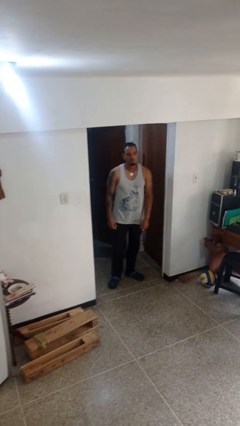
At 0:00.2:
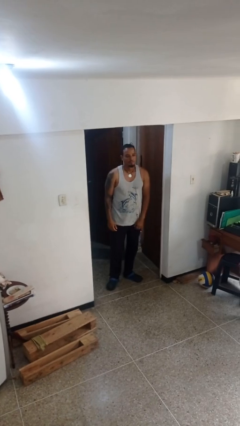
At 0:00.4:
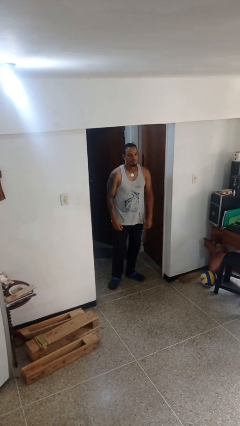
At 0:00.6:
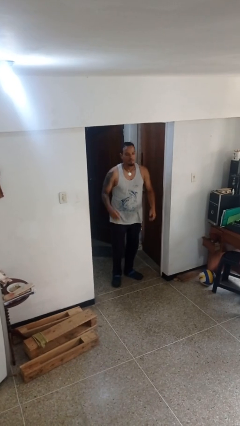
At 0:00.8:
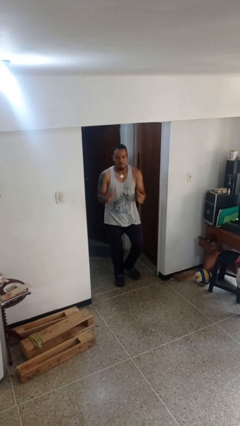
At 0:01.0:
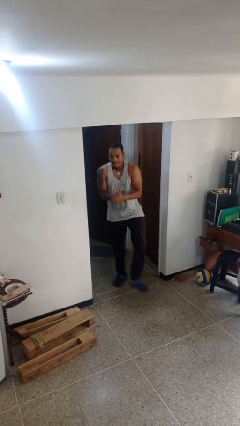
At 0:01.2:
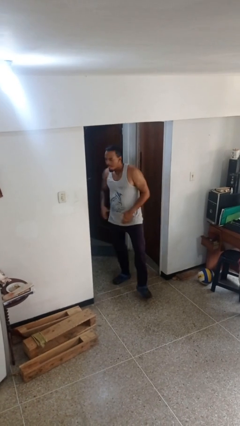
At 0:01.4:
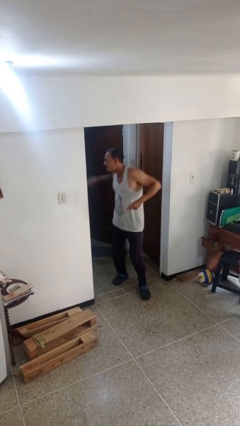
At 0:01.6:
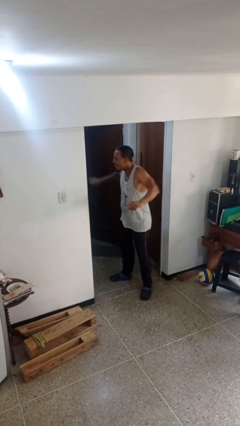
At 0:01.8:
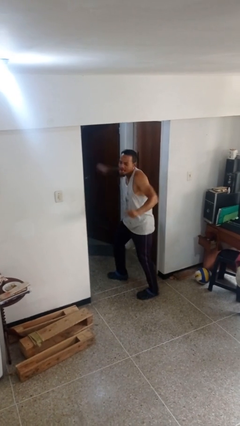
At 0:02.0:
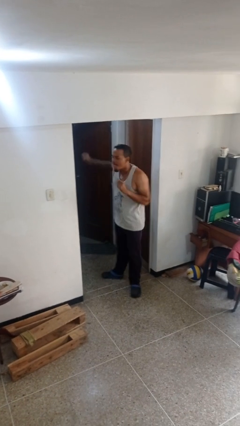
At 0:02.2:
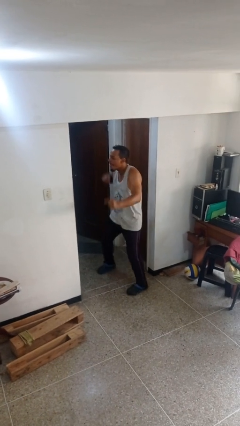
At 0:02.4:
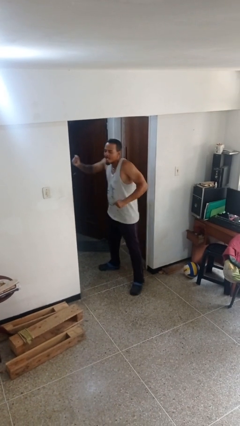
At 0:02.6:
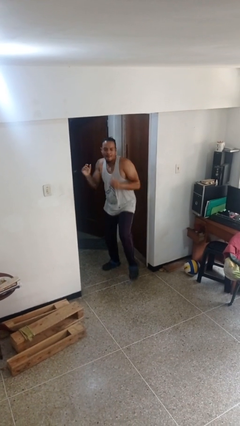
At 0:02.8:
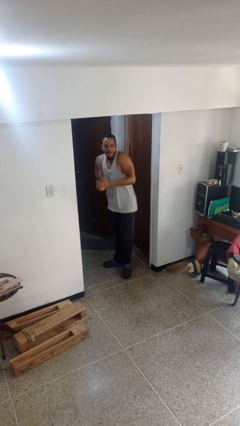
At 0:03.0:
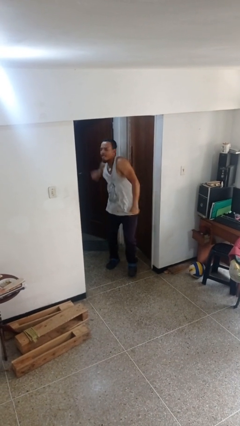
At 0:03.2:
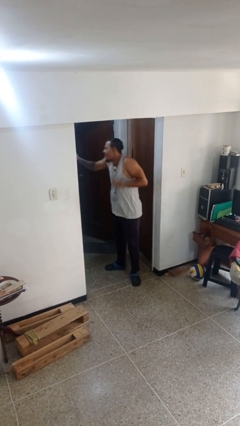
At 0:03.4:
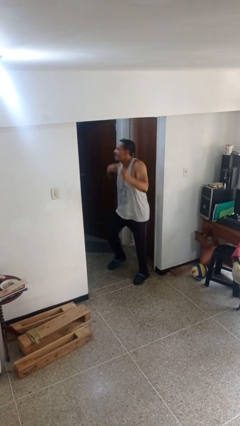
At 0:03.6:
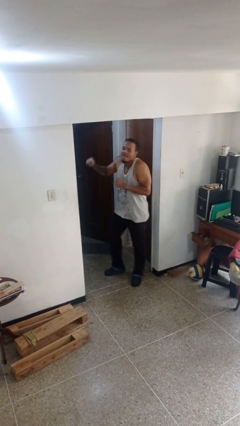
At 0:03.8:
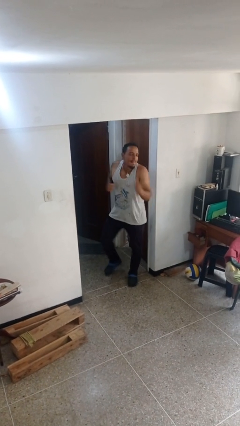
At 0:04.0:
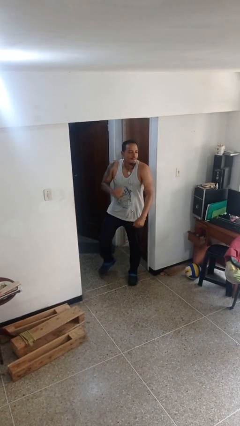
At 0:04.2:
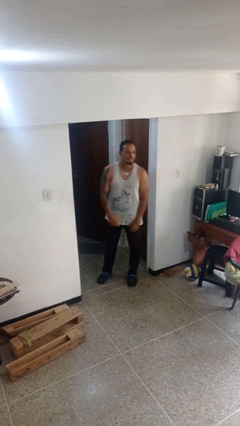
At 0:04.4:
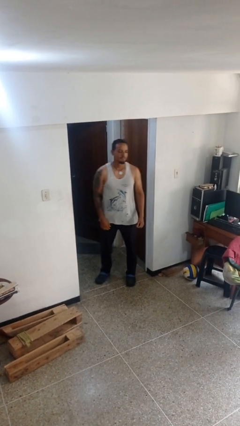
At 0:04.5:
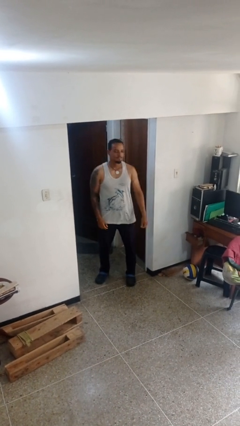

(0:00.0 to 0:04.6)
person dances in place

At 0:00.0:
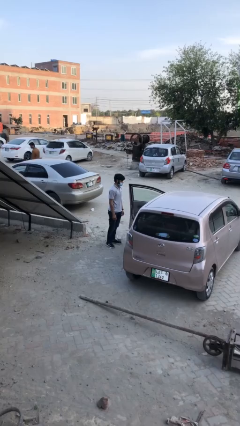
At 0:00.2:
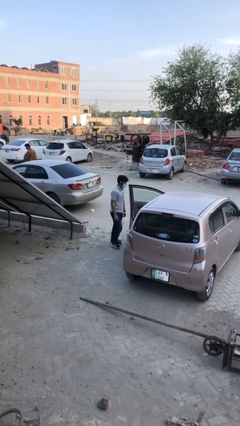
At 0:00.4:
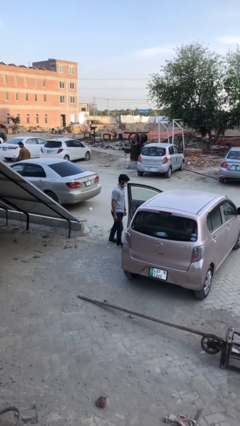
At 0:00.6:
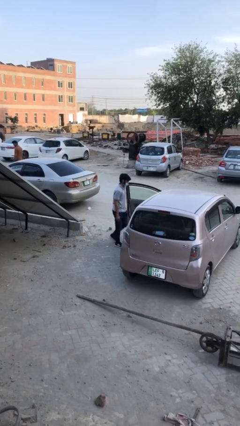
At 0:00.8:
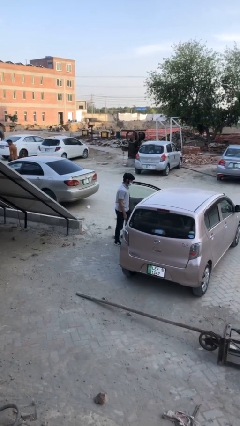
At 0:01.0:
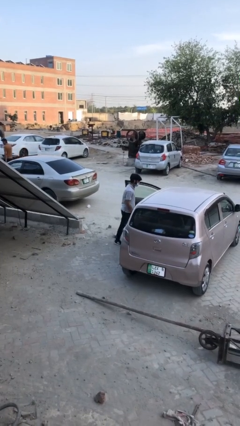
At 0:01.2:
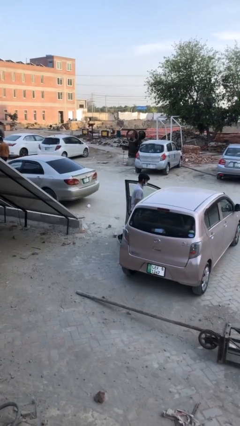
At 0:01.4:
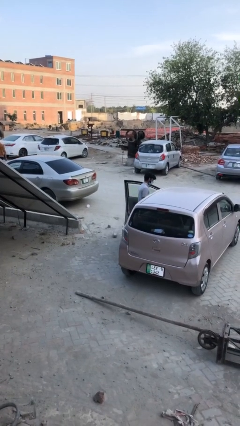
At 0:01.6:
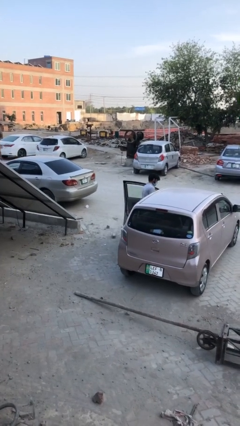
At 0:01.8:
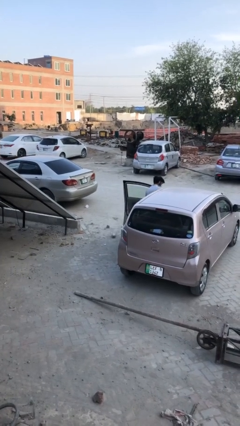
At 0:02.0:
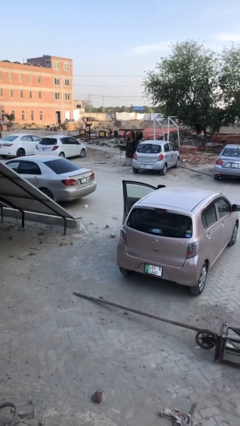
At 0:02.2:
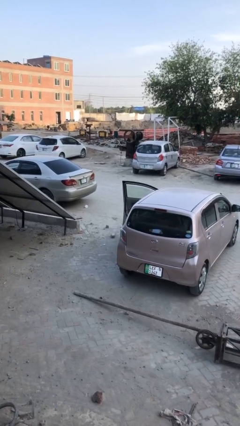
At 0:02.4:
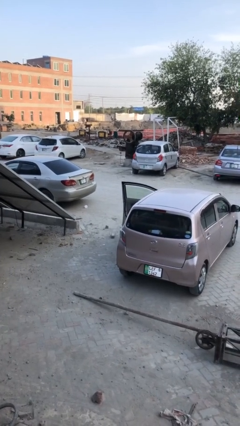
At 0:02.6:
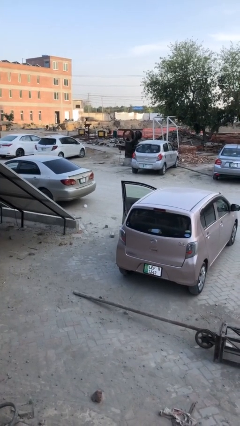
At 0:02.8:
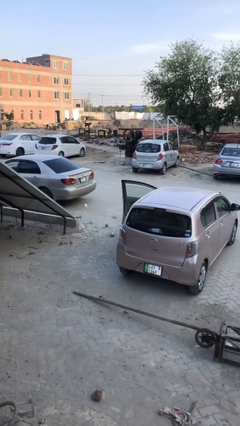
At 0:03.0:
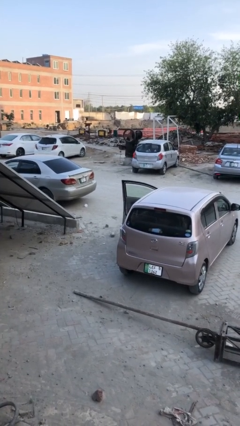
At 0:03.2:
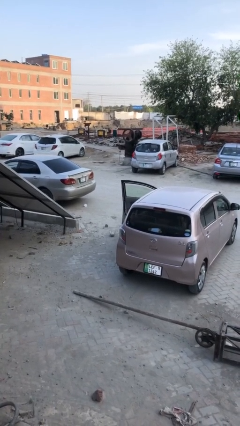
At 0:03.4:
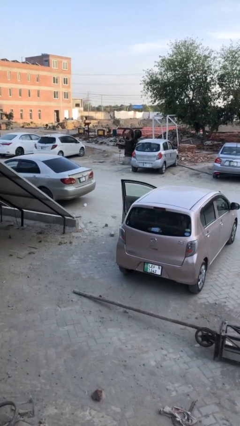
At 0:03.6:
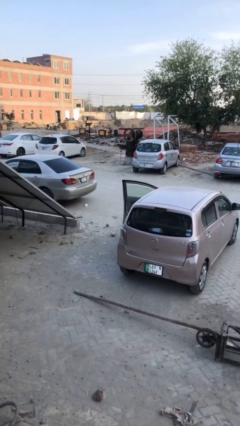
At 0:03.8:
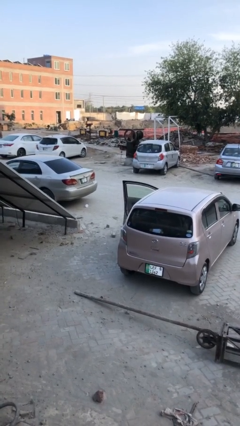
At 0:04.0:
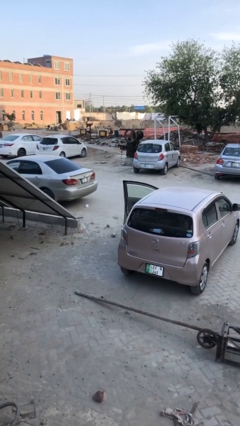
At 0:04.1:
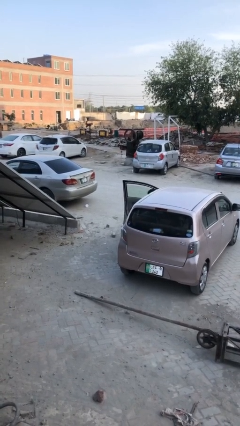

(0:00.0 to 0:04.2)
person enters car

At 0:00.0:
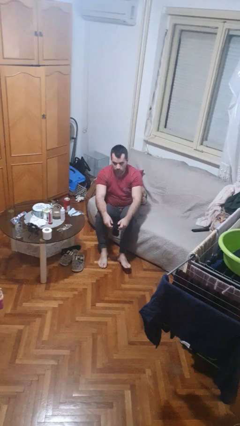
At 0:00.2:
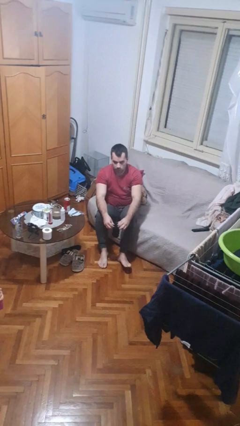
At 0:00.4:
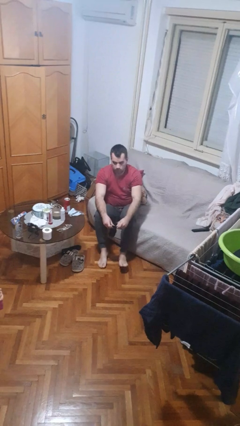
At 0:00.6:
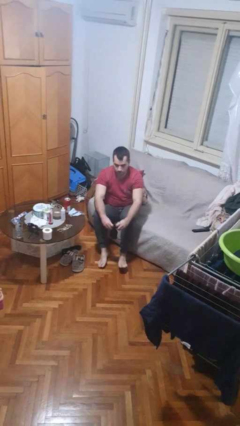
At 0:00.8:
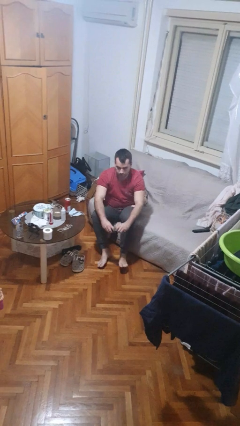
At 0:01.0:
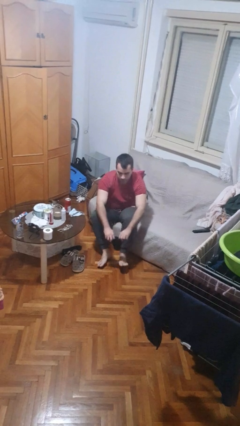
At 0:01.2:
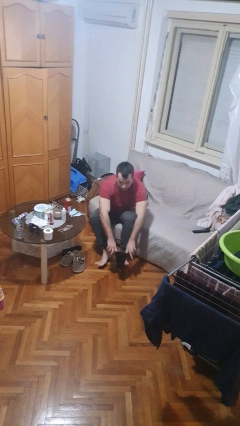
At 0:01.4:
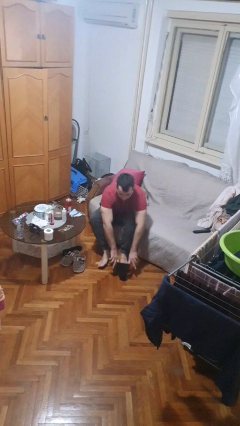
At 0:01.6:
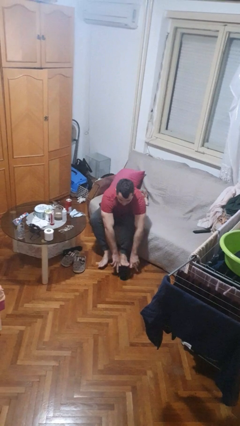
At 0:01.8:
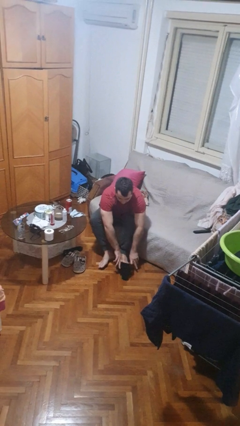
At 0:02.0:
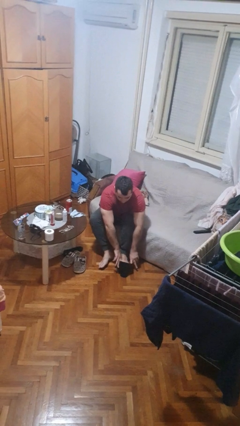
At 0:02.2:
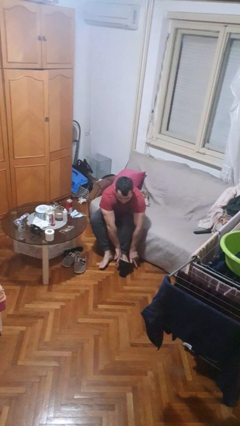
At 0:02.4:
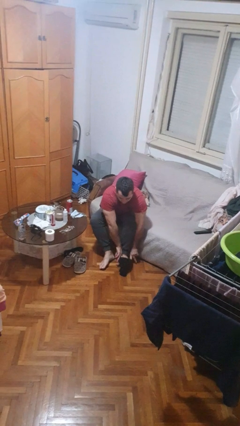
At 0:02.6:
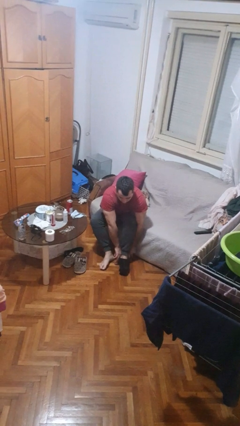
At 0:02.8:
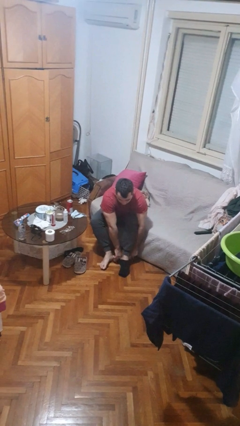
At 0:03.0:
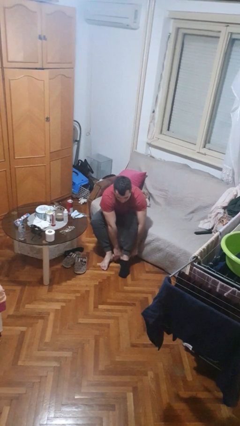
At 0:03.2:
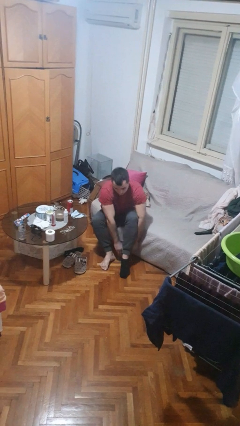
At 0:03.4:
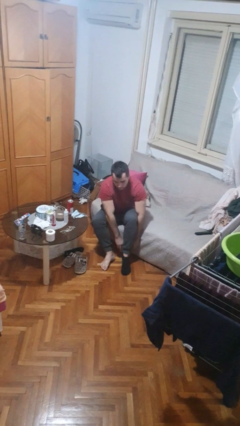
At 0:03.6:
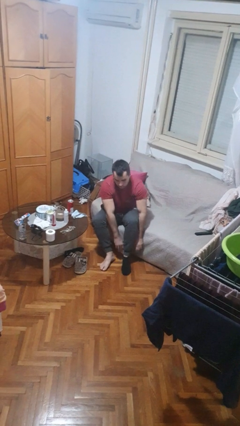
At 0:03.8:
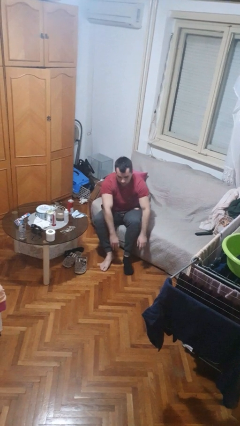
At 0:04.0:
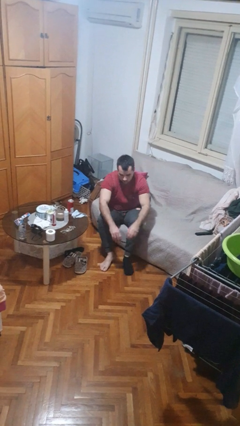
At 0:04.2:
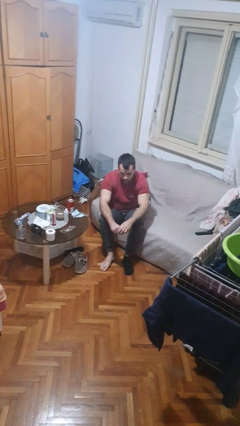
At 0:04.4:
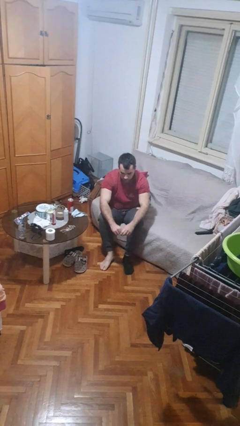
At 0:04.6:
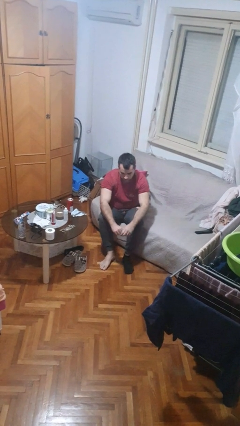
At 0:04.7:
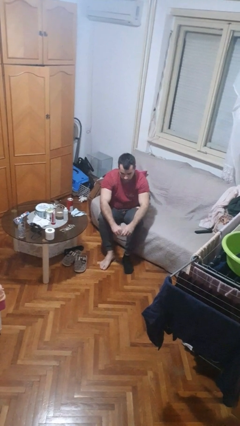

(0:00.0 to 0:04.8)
person puts on socks

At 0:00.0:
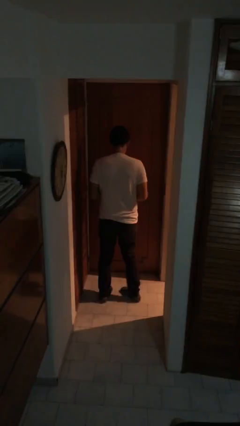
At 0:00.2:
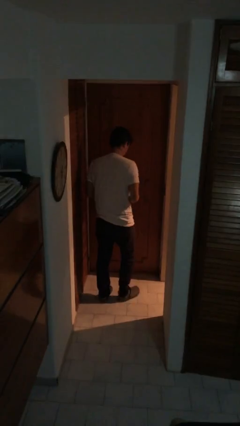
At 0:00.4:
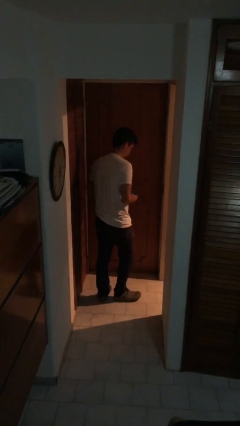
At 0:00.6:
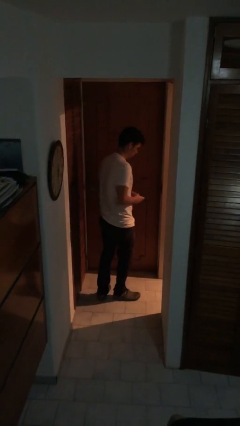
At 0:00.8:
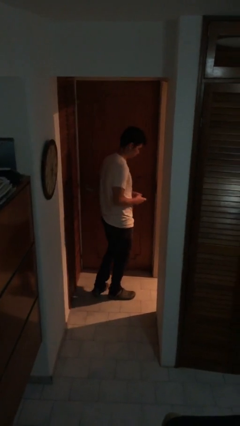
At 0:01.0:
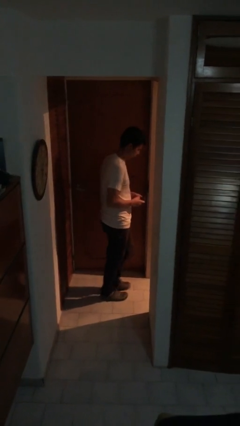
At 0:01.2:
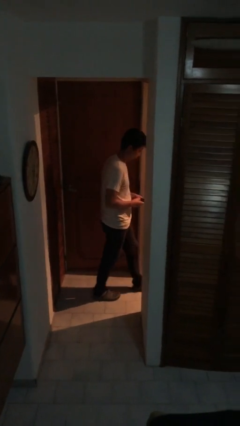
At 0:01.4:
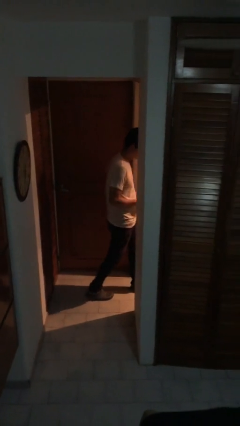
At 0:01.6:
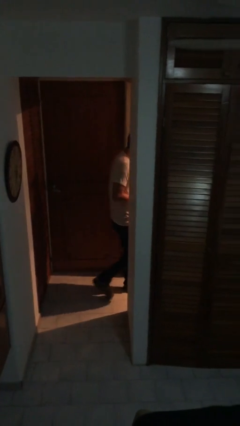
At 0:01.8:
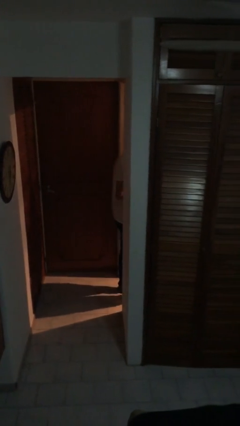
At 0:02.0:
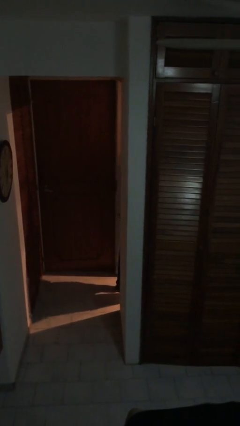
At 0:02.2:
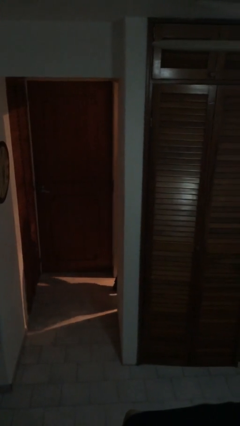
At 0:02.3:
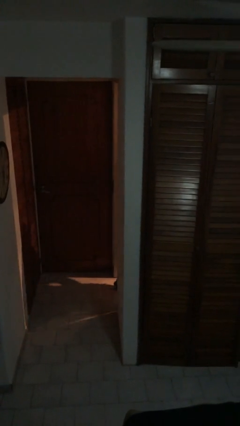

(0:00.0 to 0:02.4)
person exits scene through structure

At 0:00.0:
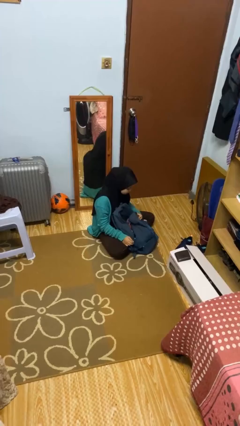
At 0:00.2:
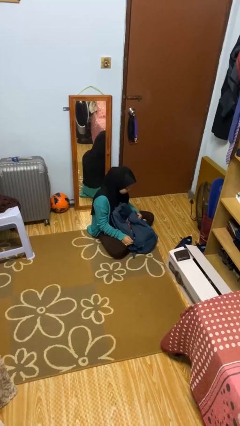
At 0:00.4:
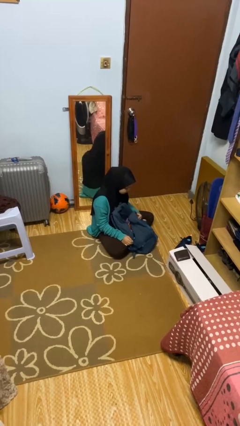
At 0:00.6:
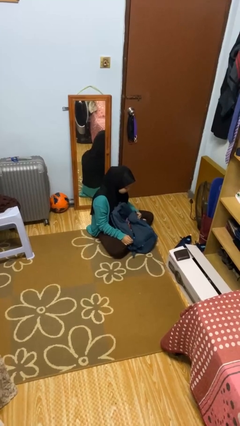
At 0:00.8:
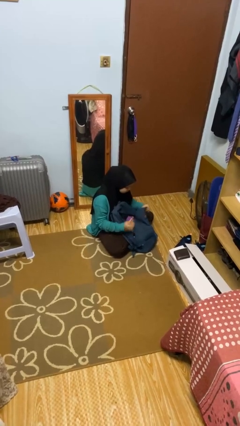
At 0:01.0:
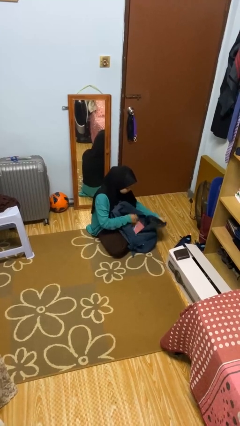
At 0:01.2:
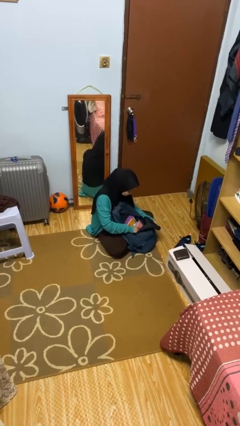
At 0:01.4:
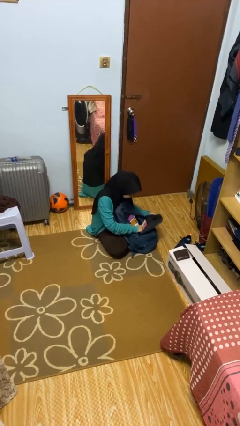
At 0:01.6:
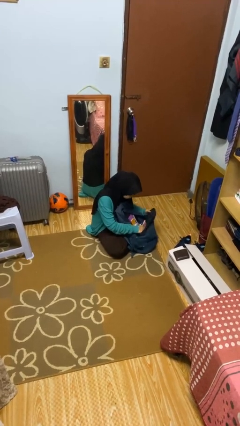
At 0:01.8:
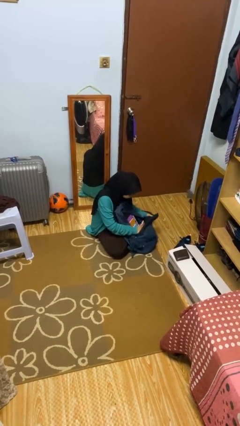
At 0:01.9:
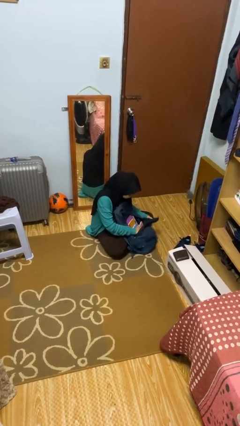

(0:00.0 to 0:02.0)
person searches in backpack
